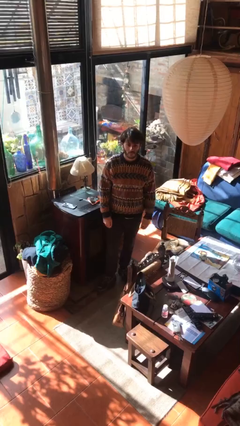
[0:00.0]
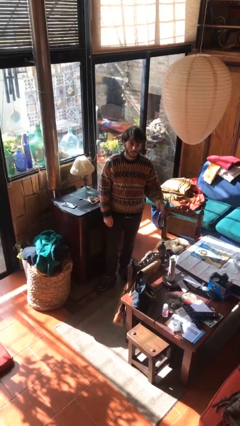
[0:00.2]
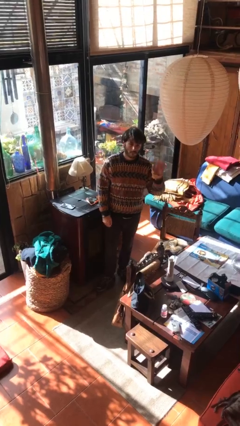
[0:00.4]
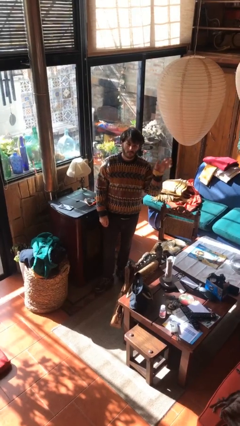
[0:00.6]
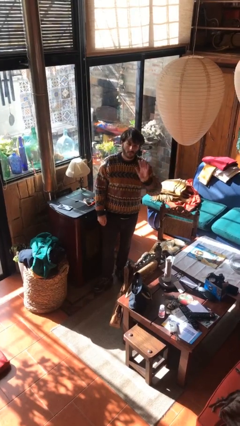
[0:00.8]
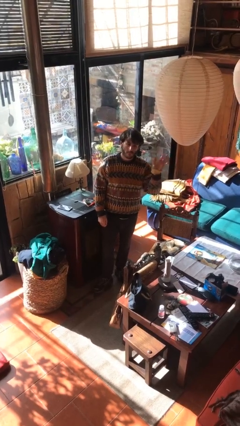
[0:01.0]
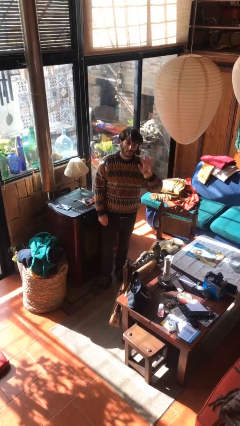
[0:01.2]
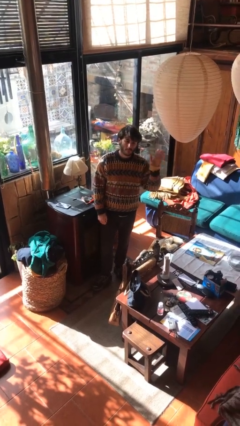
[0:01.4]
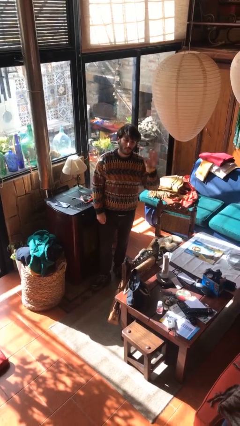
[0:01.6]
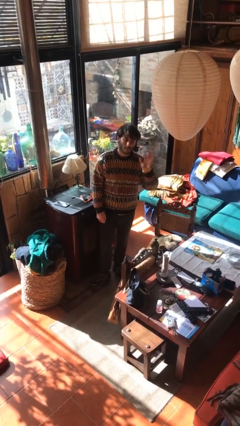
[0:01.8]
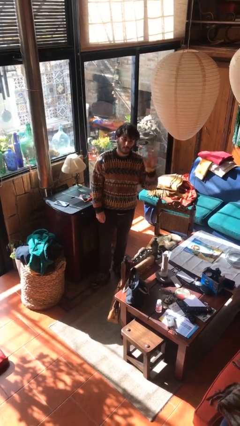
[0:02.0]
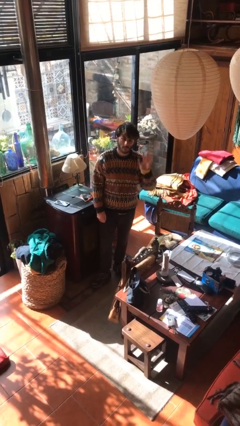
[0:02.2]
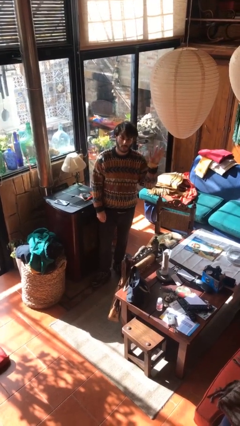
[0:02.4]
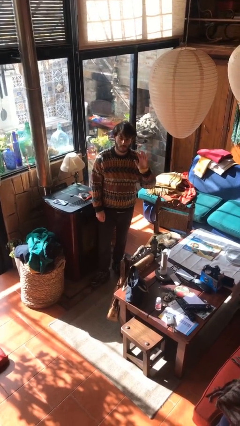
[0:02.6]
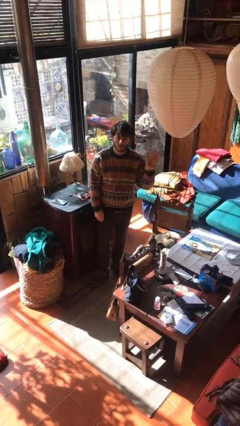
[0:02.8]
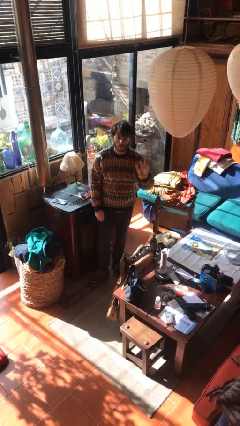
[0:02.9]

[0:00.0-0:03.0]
person waves at person

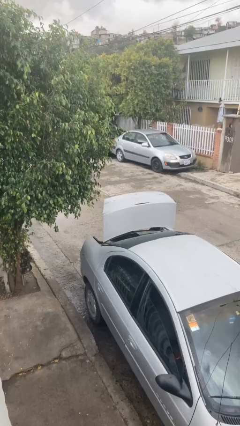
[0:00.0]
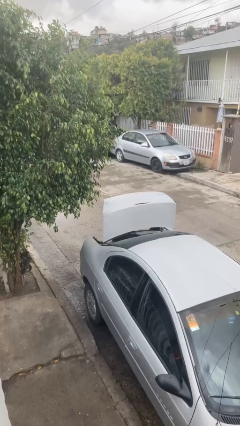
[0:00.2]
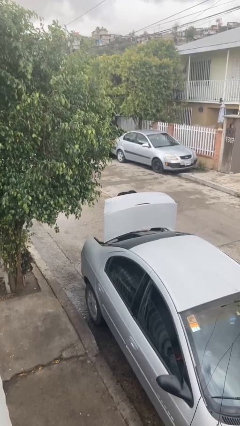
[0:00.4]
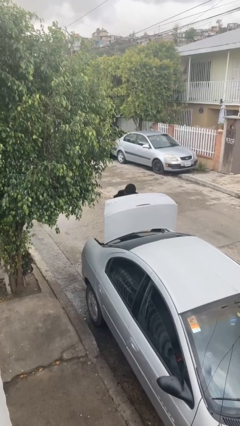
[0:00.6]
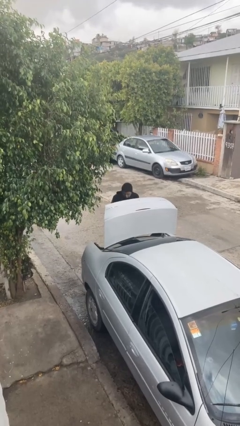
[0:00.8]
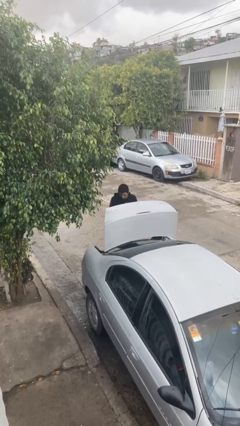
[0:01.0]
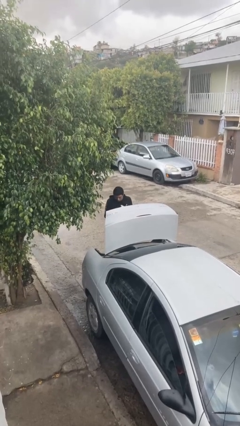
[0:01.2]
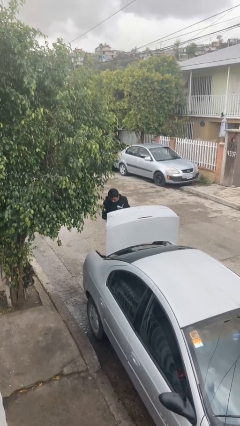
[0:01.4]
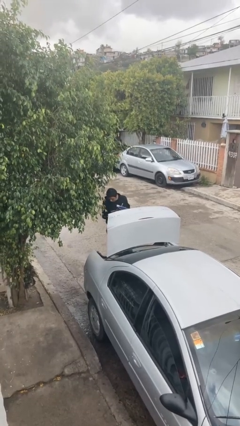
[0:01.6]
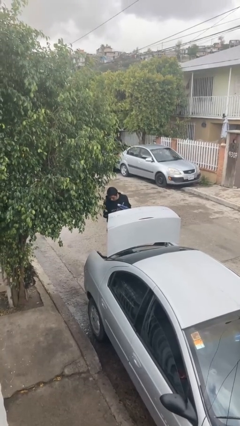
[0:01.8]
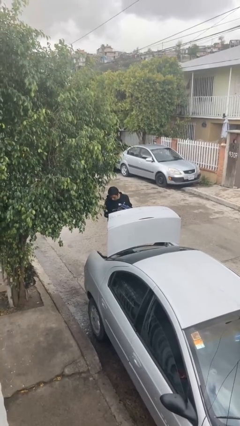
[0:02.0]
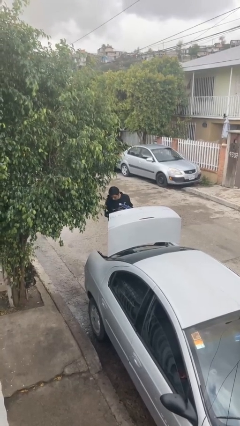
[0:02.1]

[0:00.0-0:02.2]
person unloads car

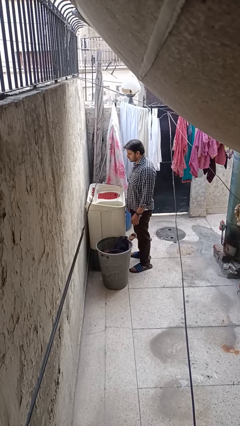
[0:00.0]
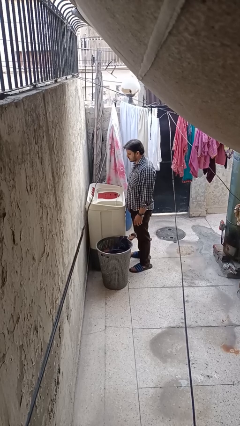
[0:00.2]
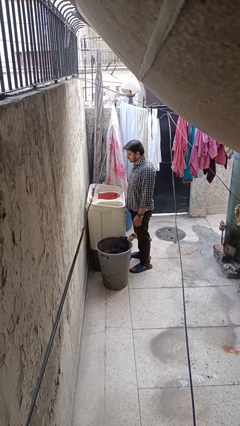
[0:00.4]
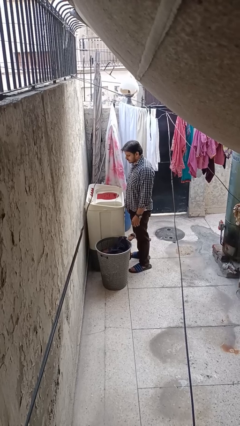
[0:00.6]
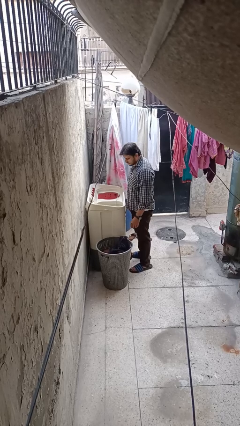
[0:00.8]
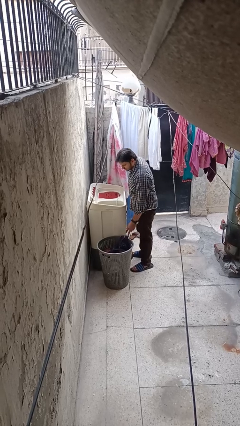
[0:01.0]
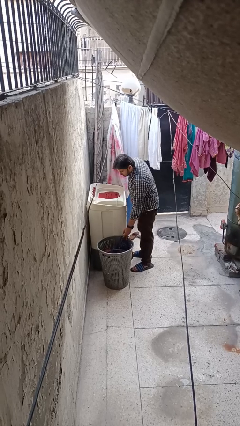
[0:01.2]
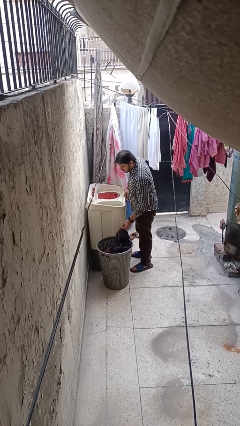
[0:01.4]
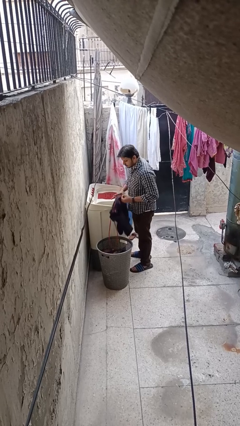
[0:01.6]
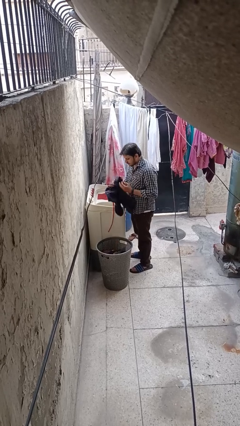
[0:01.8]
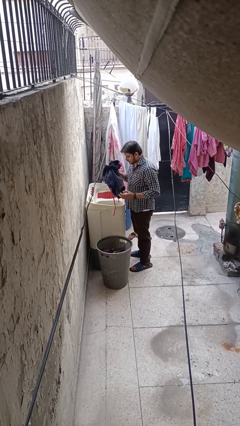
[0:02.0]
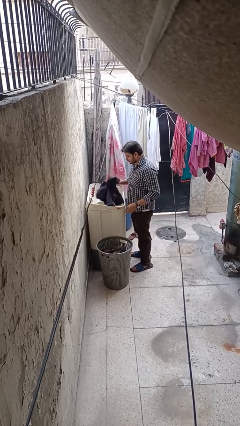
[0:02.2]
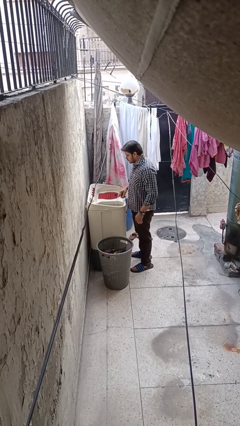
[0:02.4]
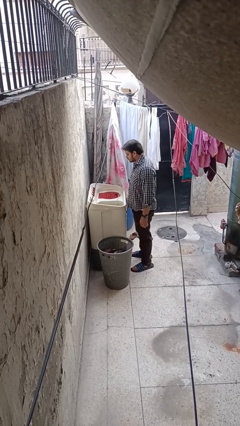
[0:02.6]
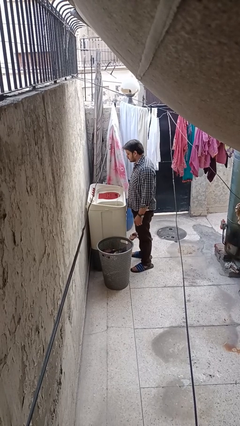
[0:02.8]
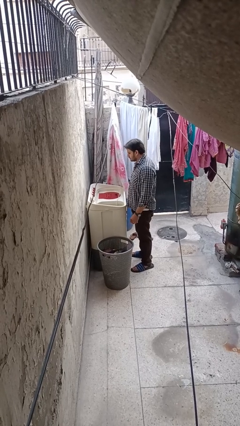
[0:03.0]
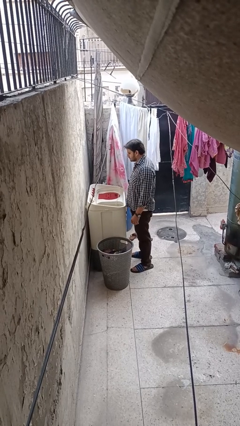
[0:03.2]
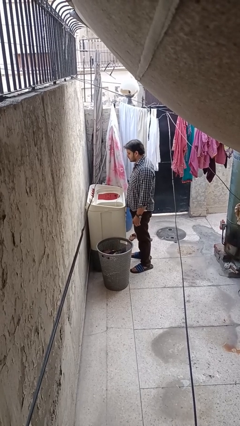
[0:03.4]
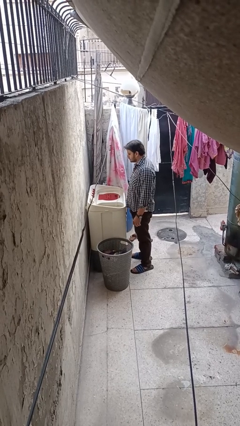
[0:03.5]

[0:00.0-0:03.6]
person unloads clotheswasher

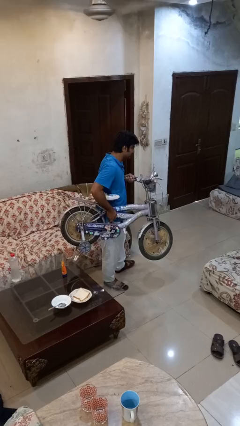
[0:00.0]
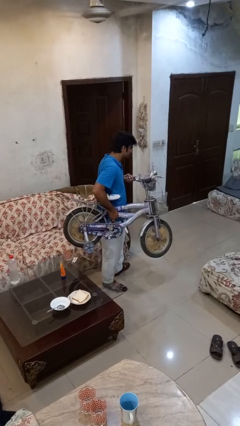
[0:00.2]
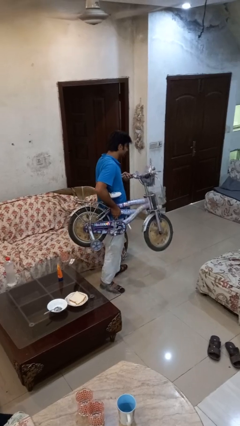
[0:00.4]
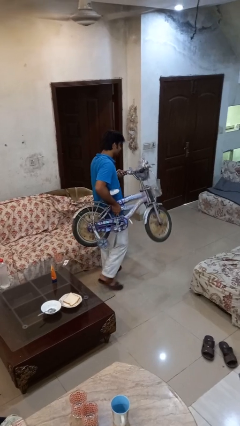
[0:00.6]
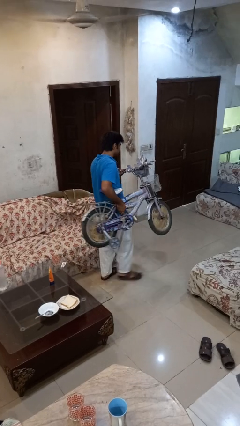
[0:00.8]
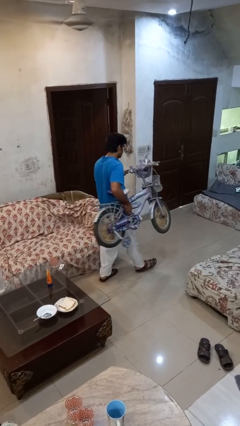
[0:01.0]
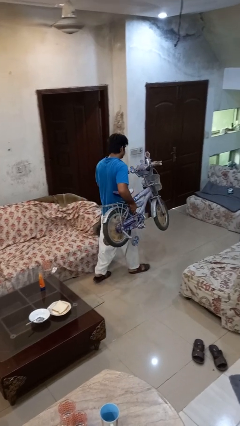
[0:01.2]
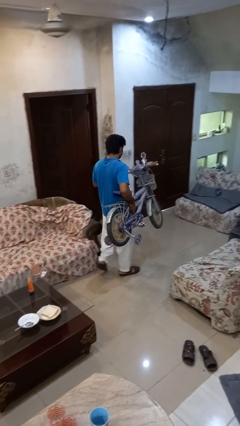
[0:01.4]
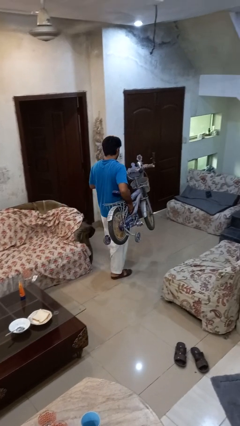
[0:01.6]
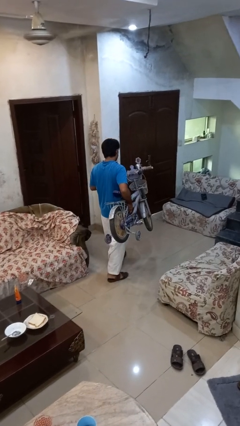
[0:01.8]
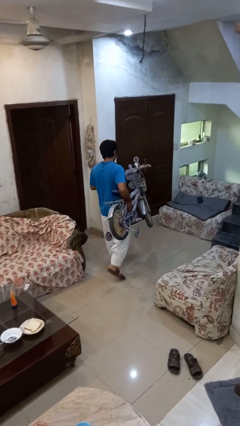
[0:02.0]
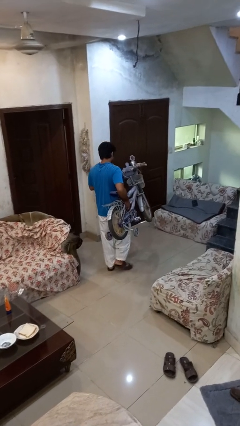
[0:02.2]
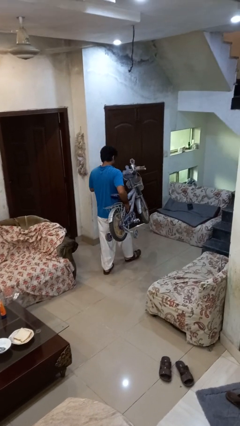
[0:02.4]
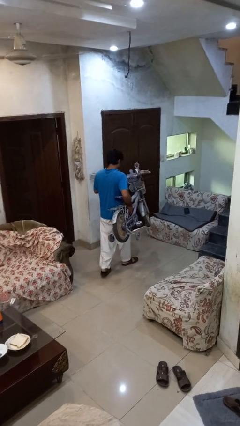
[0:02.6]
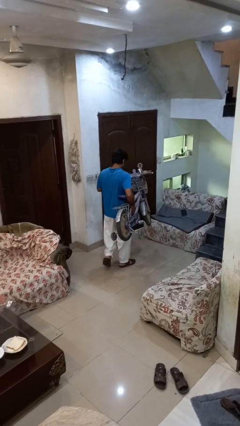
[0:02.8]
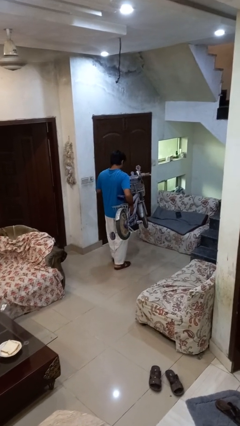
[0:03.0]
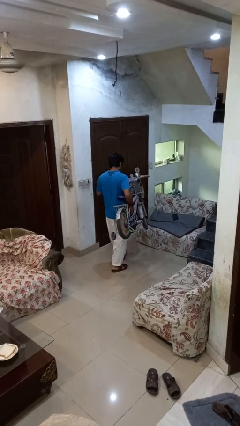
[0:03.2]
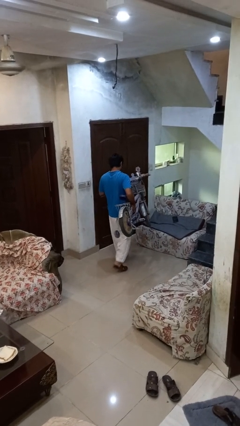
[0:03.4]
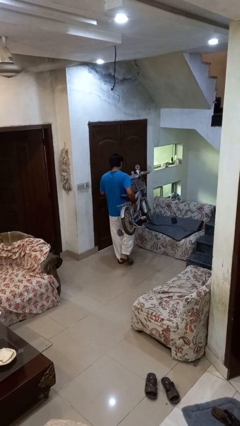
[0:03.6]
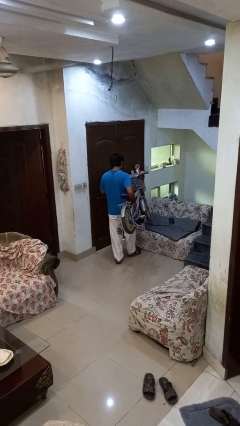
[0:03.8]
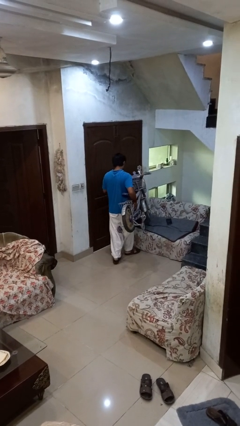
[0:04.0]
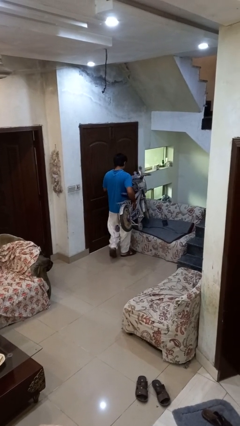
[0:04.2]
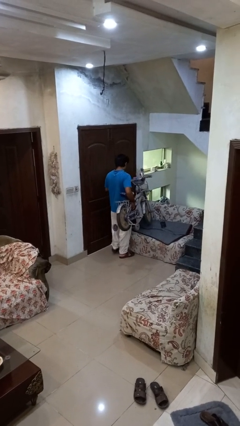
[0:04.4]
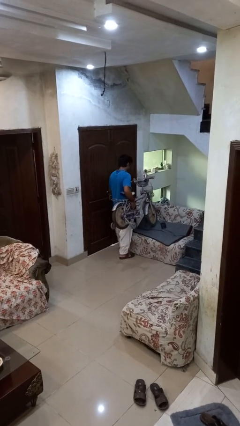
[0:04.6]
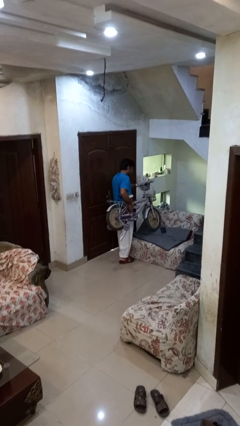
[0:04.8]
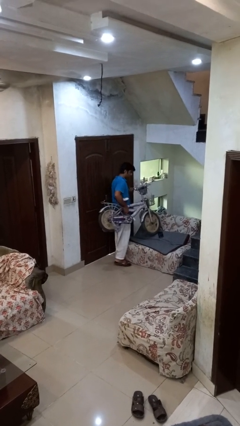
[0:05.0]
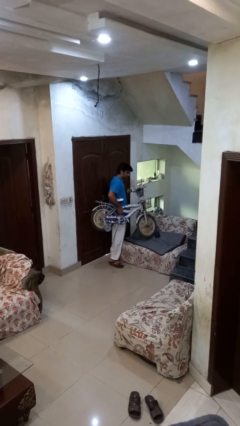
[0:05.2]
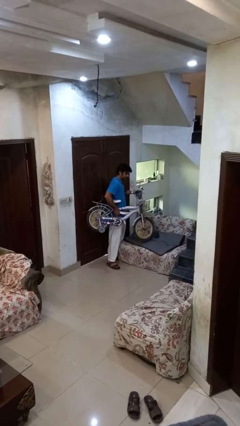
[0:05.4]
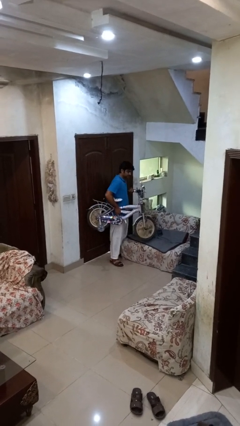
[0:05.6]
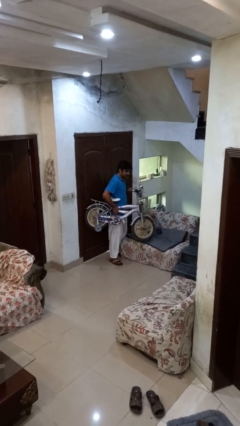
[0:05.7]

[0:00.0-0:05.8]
person carries bicycle

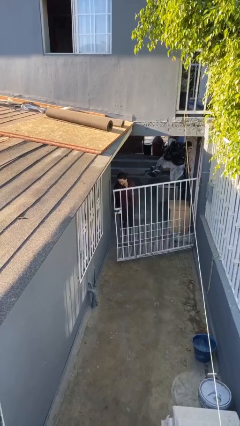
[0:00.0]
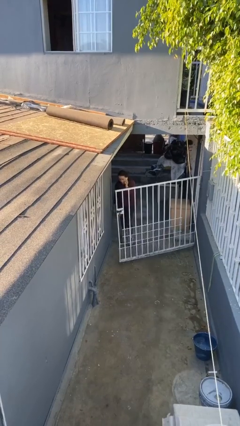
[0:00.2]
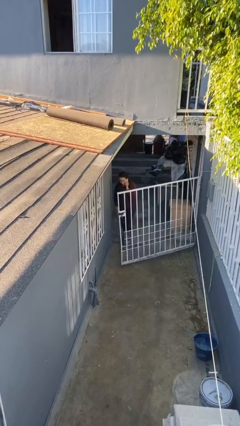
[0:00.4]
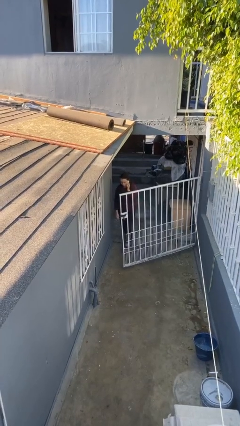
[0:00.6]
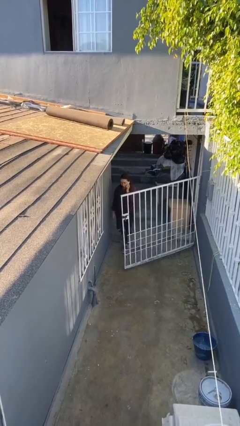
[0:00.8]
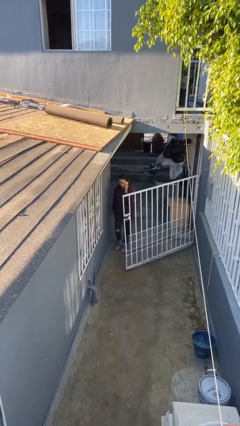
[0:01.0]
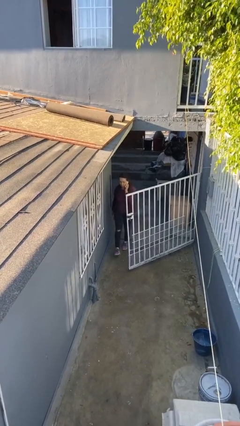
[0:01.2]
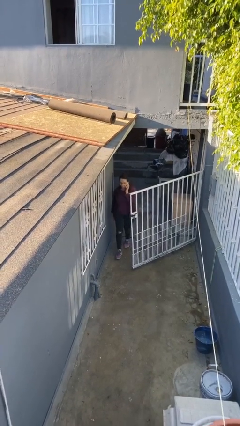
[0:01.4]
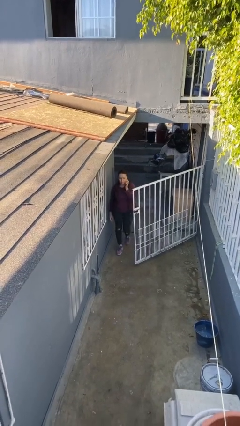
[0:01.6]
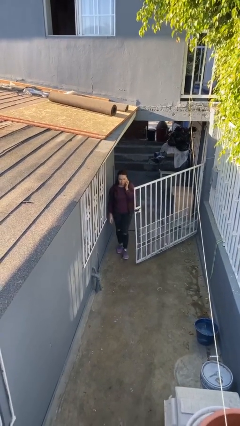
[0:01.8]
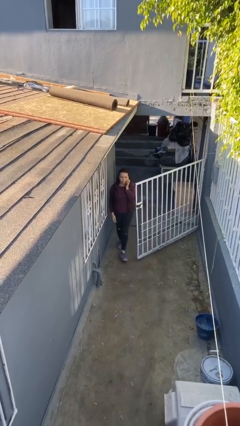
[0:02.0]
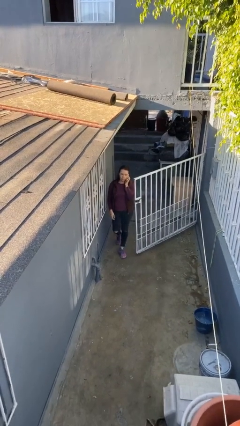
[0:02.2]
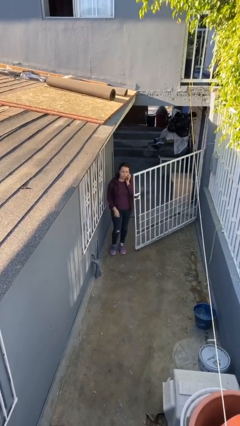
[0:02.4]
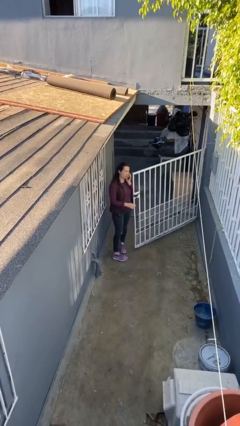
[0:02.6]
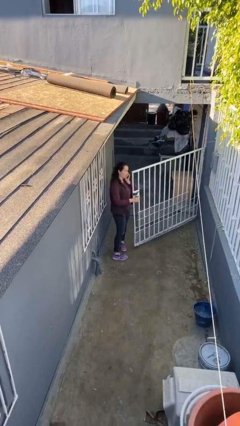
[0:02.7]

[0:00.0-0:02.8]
person enters scene through structure
